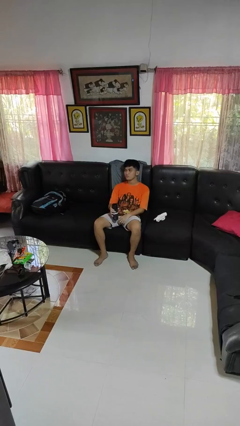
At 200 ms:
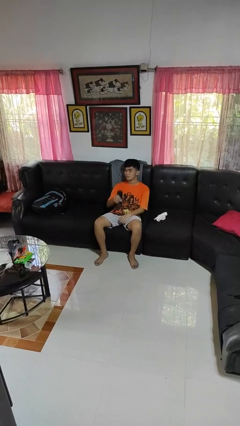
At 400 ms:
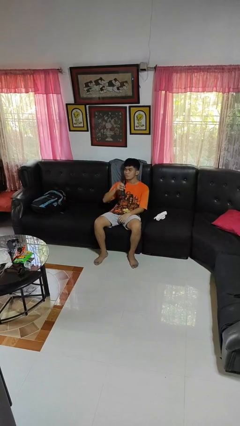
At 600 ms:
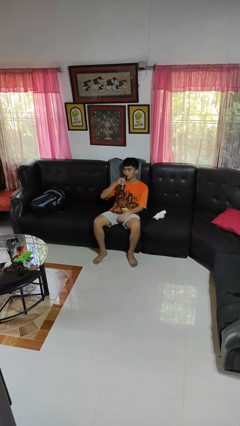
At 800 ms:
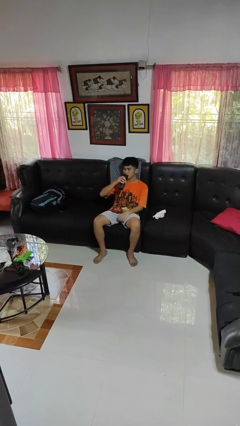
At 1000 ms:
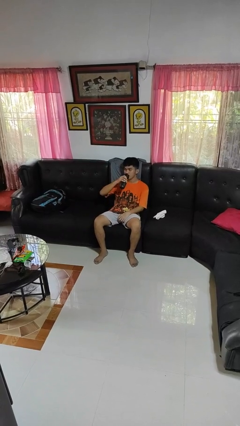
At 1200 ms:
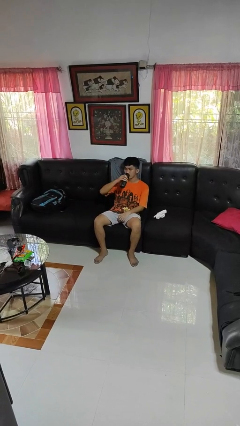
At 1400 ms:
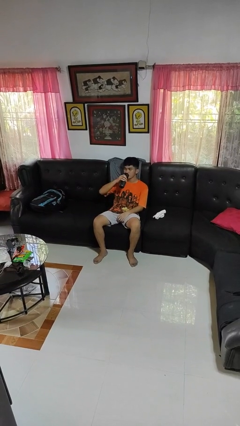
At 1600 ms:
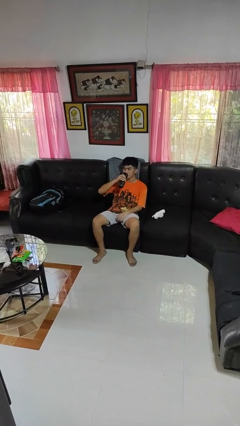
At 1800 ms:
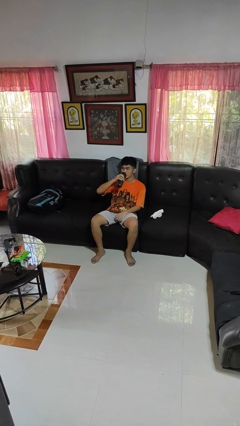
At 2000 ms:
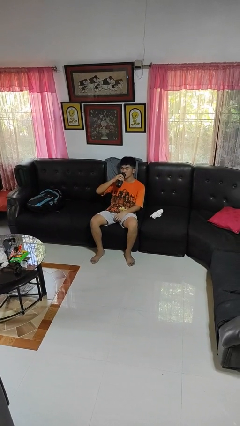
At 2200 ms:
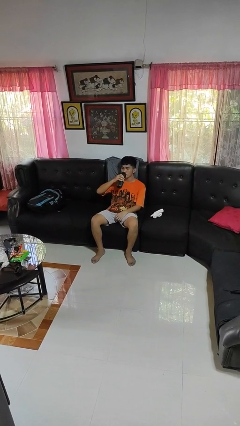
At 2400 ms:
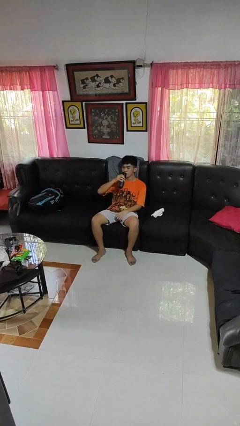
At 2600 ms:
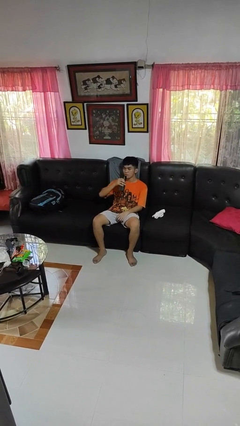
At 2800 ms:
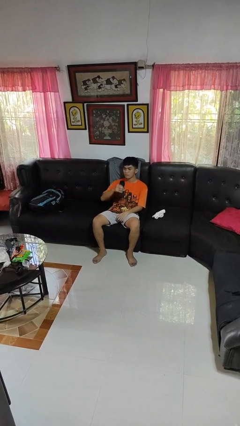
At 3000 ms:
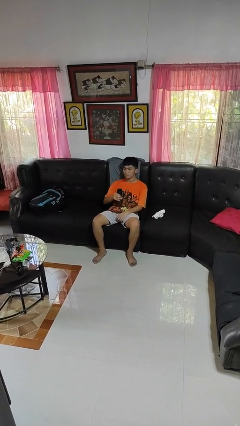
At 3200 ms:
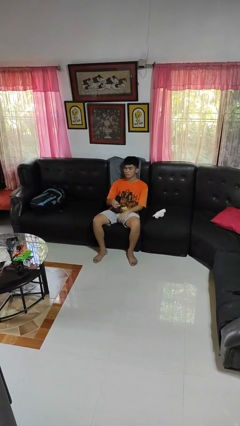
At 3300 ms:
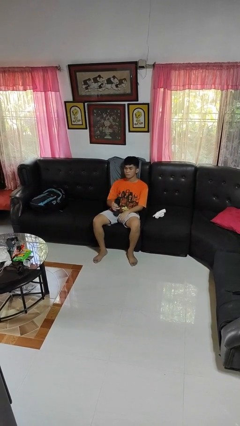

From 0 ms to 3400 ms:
person drinks from bottle

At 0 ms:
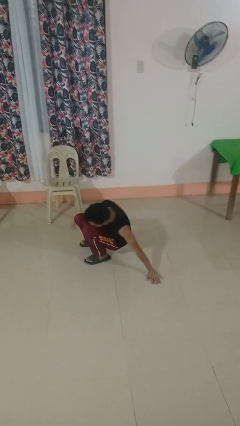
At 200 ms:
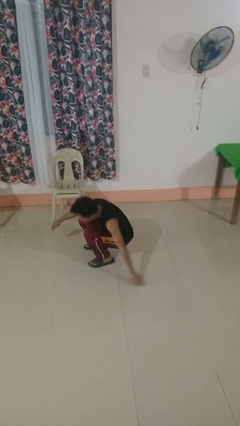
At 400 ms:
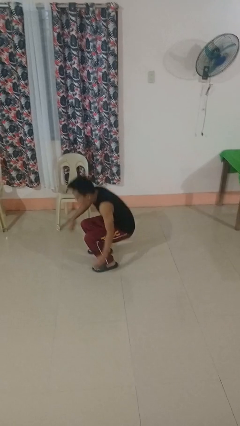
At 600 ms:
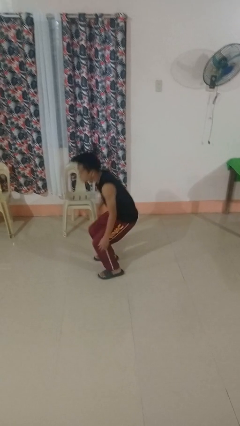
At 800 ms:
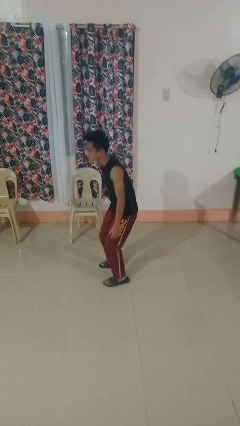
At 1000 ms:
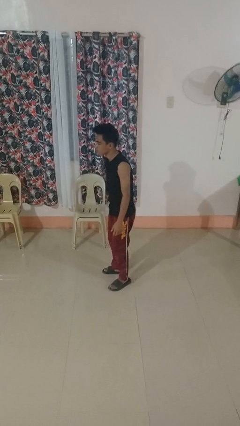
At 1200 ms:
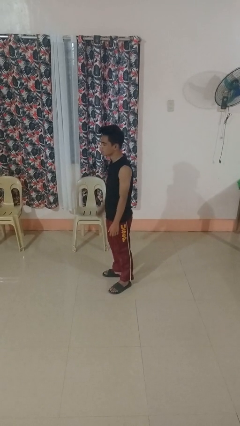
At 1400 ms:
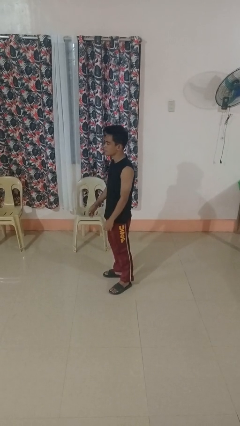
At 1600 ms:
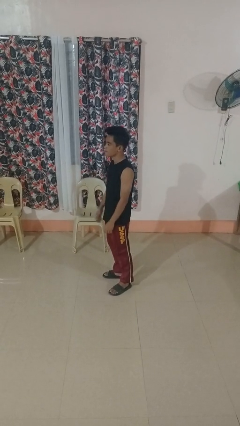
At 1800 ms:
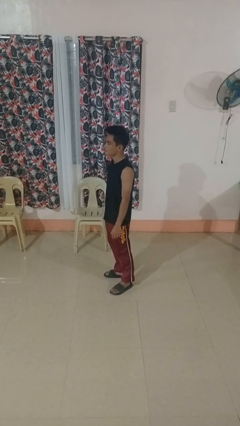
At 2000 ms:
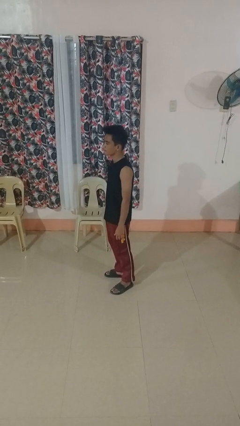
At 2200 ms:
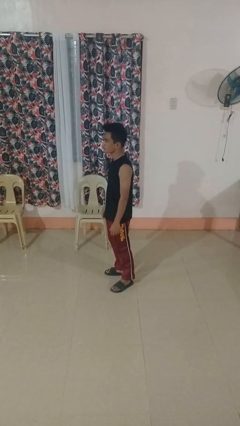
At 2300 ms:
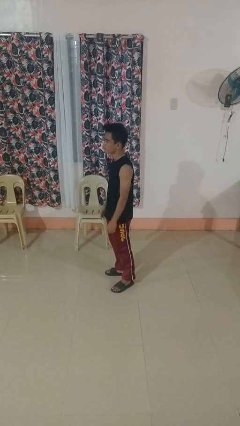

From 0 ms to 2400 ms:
person stands up from floor

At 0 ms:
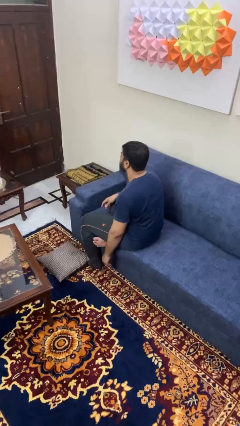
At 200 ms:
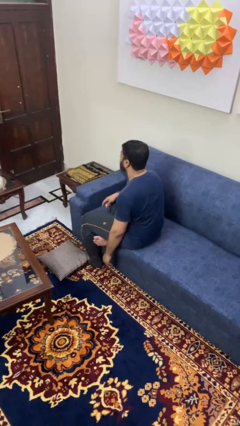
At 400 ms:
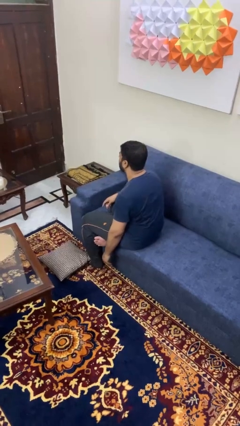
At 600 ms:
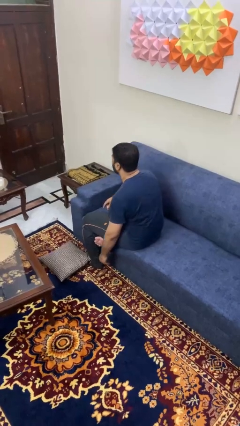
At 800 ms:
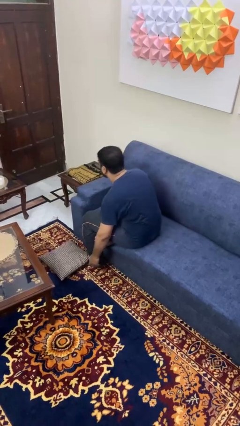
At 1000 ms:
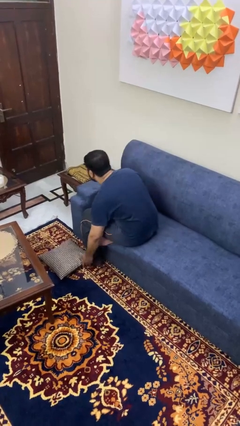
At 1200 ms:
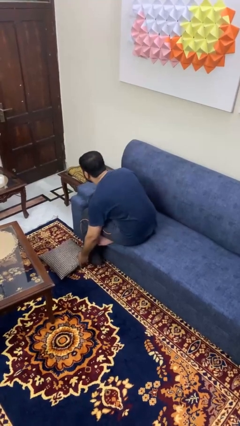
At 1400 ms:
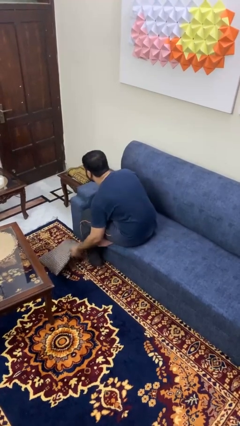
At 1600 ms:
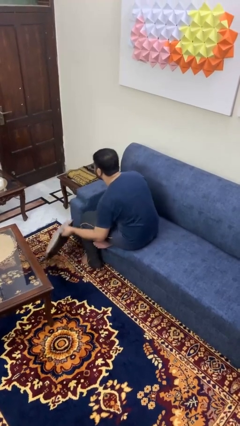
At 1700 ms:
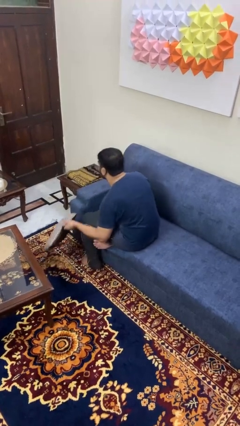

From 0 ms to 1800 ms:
person picks up object from floor

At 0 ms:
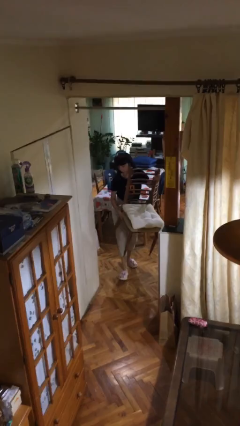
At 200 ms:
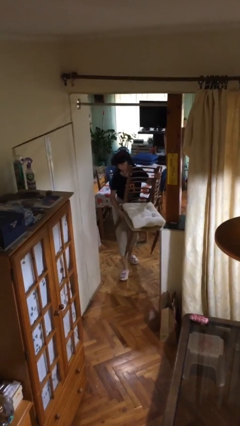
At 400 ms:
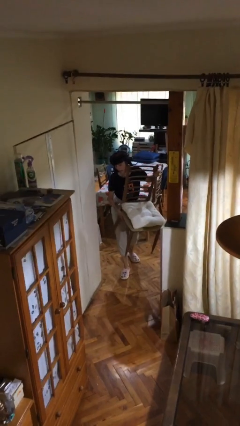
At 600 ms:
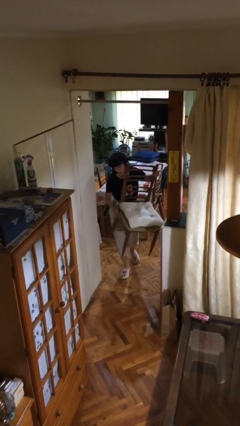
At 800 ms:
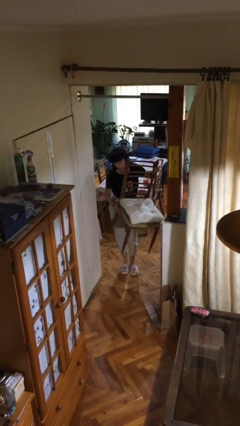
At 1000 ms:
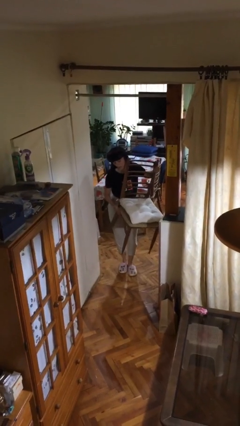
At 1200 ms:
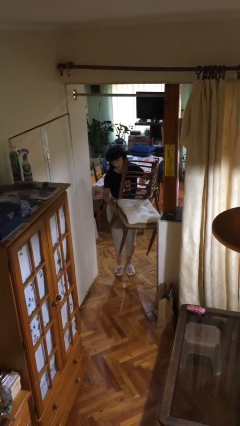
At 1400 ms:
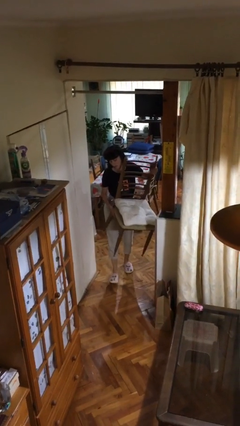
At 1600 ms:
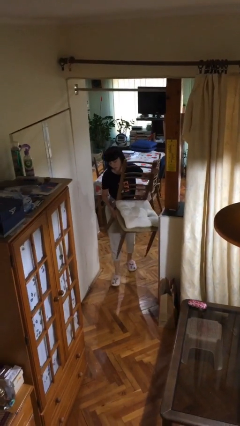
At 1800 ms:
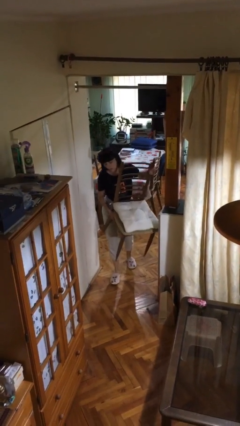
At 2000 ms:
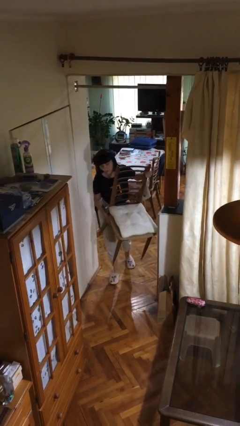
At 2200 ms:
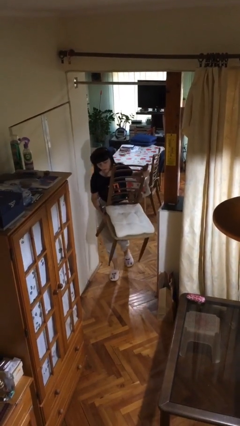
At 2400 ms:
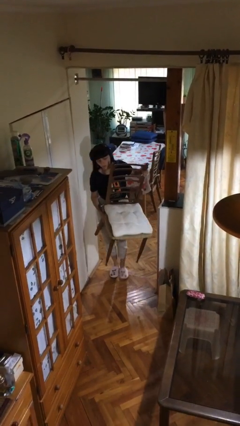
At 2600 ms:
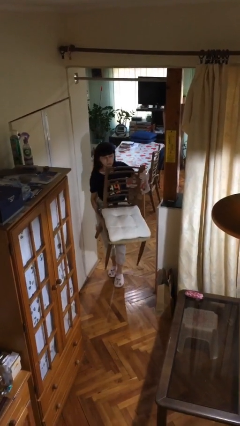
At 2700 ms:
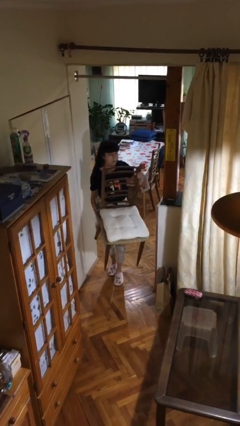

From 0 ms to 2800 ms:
person carries heavy object

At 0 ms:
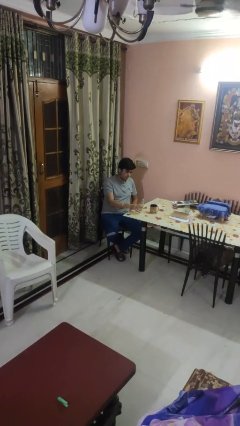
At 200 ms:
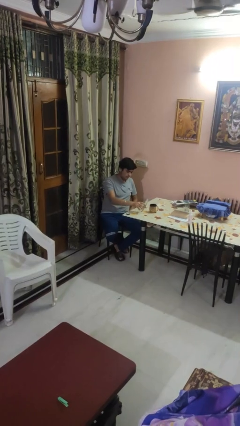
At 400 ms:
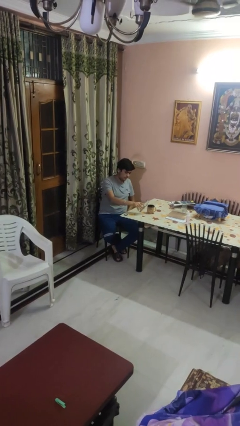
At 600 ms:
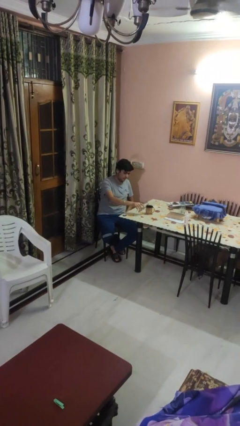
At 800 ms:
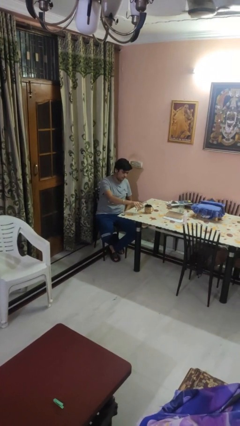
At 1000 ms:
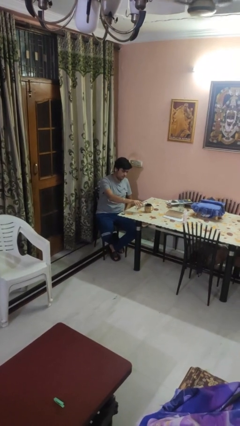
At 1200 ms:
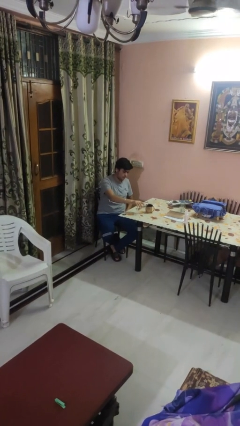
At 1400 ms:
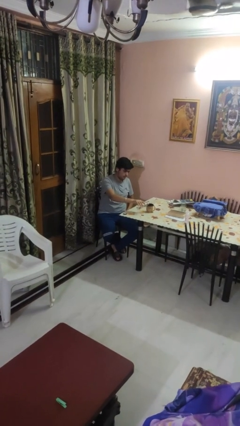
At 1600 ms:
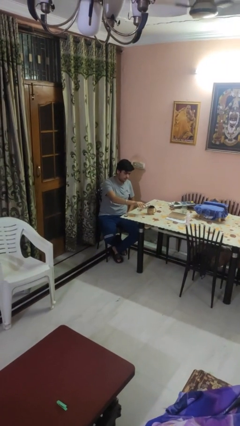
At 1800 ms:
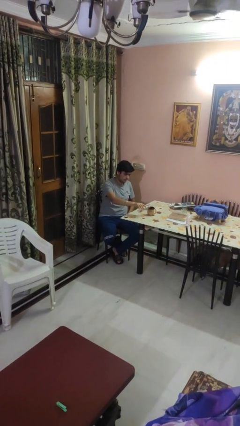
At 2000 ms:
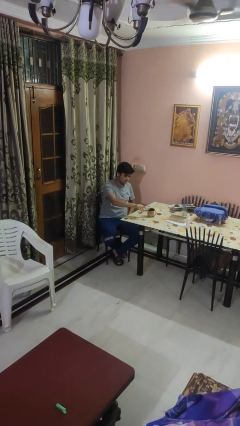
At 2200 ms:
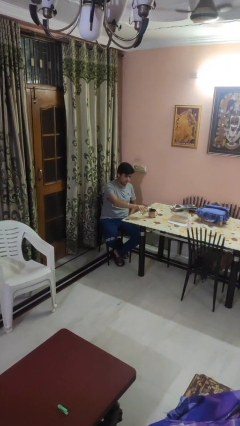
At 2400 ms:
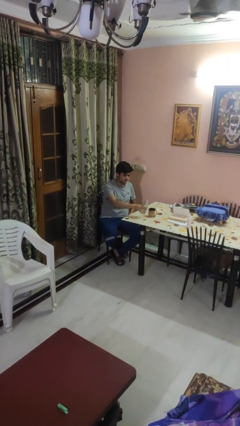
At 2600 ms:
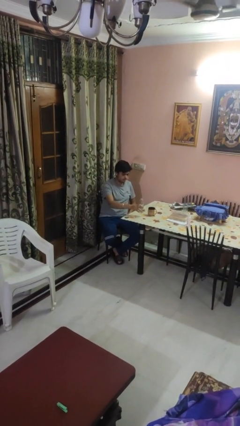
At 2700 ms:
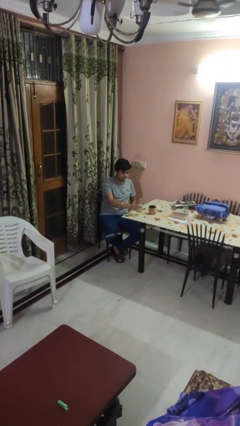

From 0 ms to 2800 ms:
person pours liquid into cup

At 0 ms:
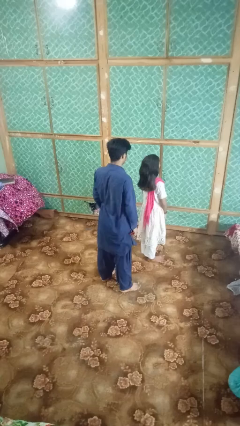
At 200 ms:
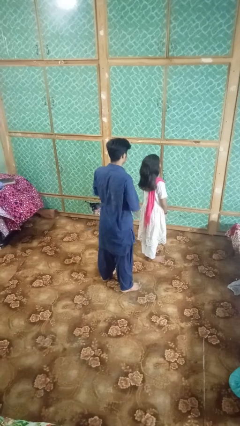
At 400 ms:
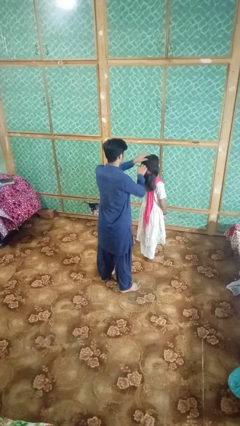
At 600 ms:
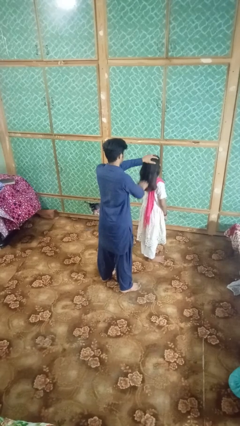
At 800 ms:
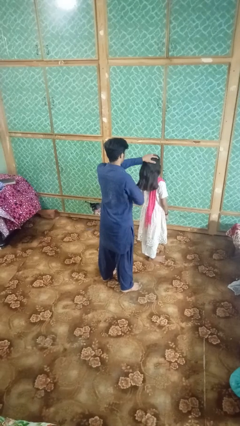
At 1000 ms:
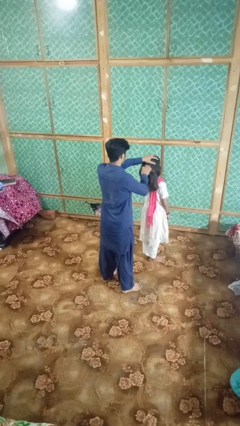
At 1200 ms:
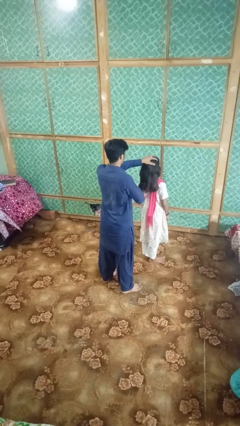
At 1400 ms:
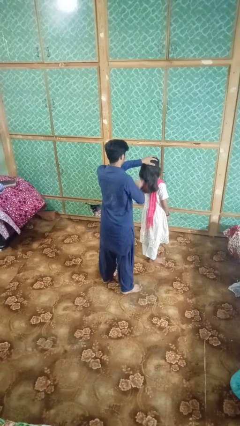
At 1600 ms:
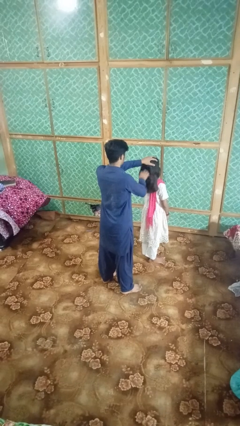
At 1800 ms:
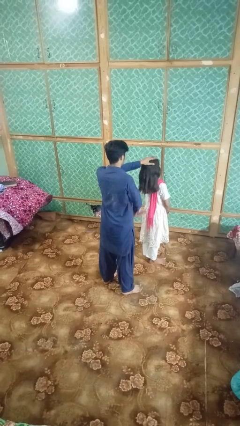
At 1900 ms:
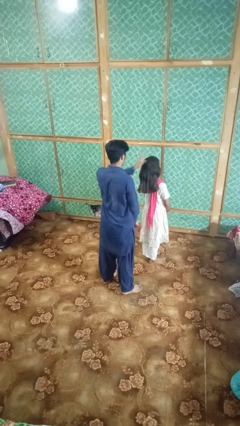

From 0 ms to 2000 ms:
person brushes hair of person

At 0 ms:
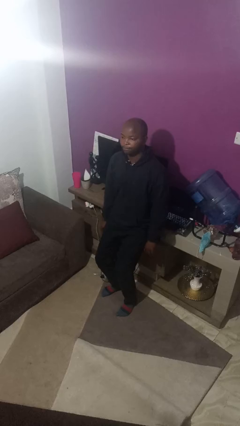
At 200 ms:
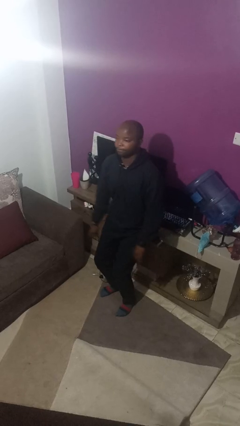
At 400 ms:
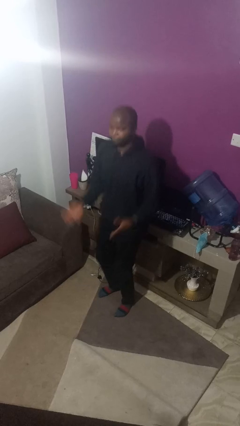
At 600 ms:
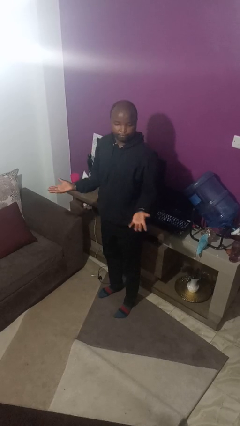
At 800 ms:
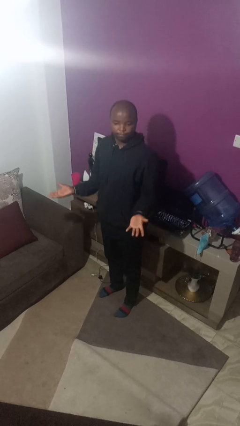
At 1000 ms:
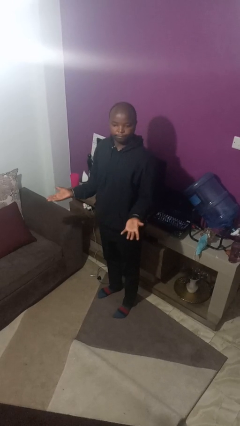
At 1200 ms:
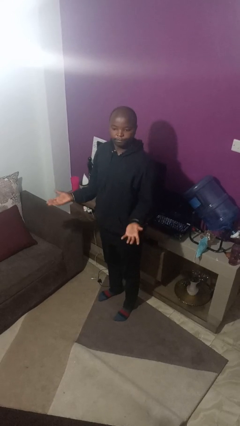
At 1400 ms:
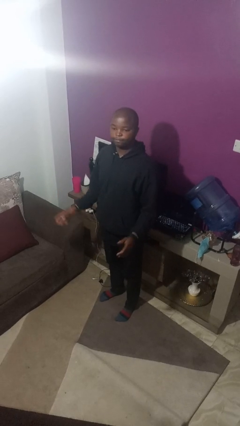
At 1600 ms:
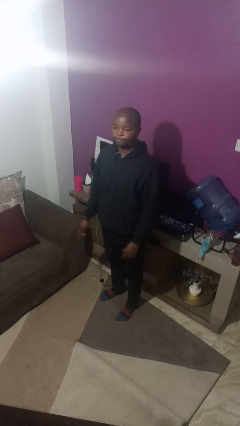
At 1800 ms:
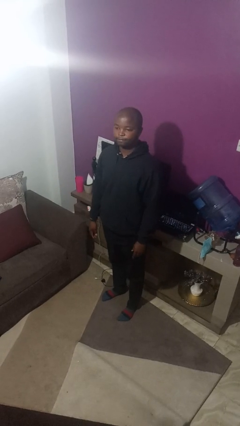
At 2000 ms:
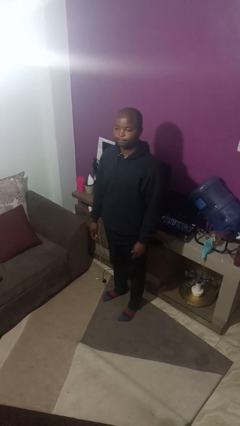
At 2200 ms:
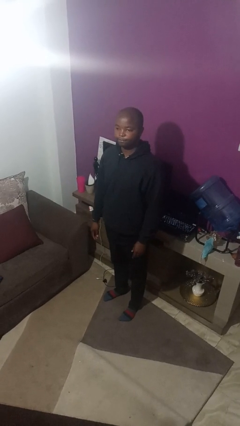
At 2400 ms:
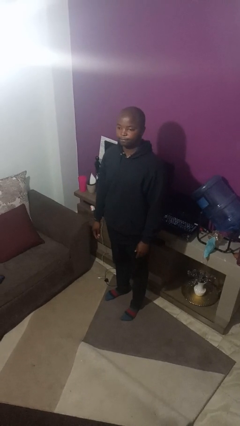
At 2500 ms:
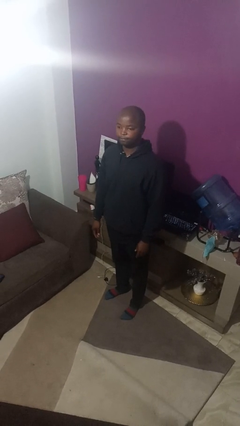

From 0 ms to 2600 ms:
person shrugs
